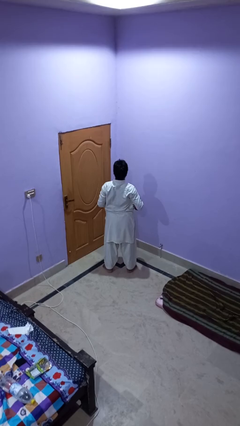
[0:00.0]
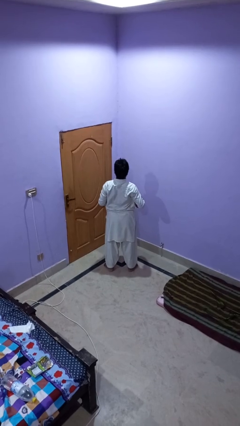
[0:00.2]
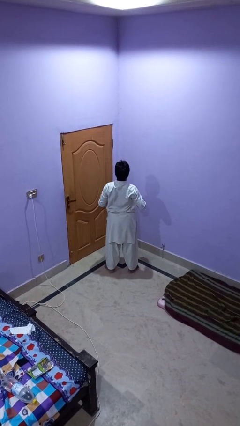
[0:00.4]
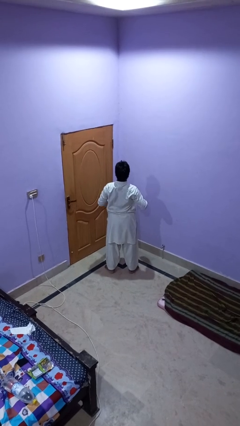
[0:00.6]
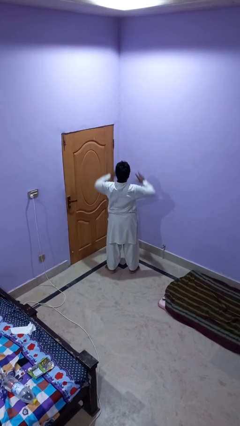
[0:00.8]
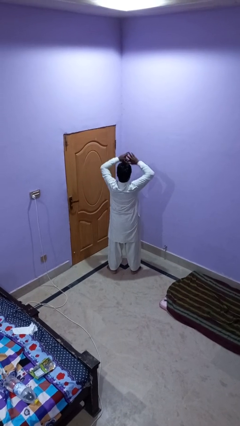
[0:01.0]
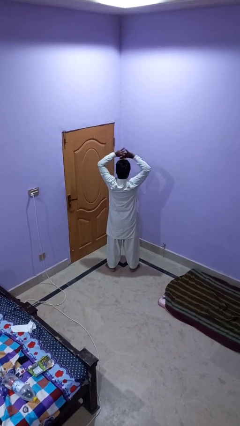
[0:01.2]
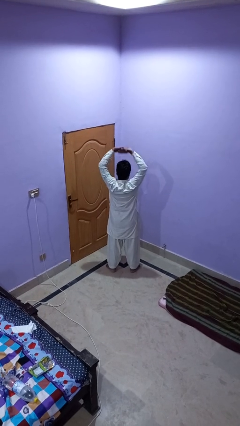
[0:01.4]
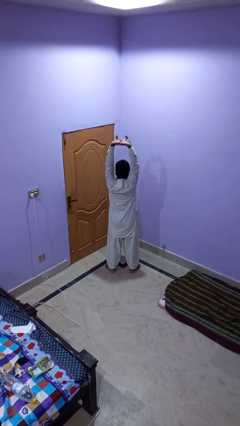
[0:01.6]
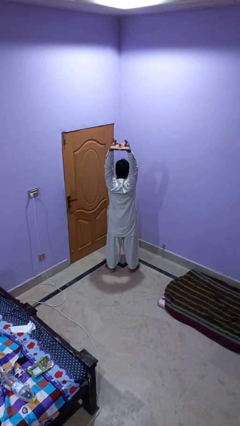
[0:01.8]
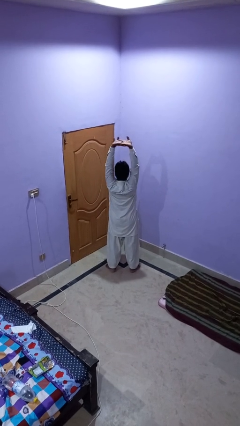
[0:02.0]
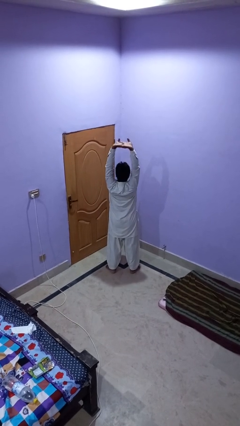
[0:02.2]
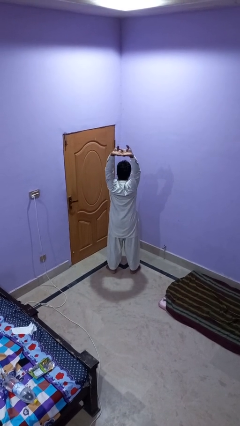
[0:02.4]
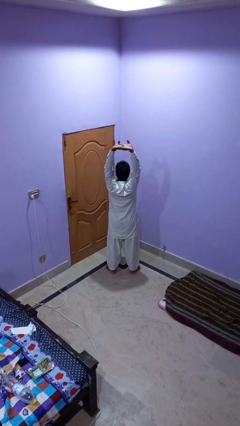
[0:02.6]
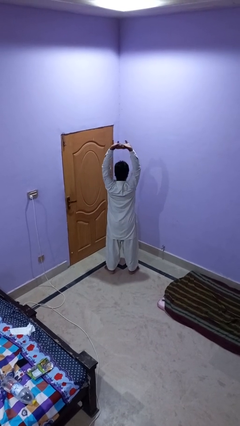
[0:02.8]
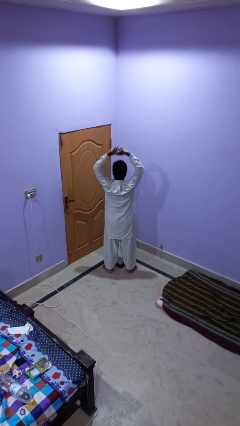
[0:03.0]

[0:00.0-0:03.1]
person stretches arms over head

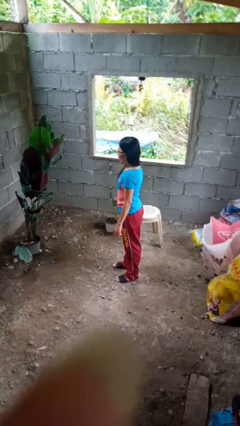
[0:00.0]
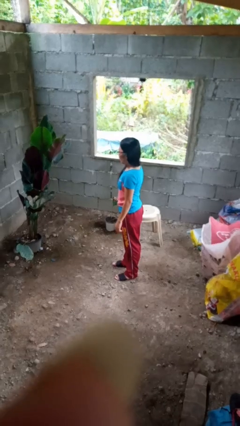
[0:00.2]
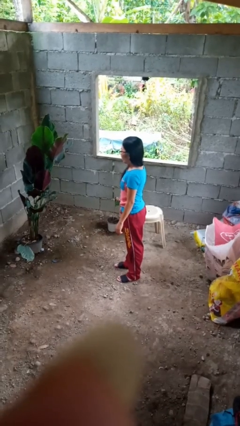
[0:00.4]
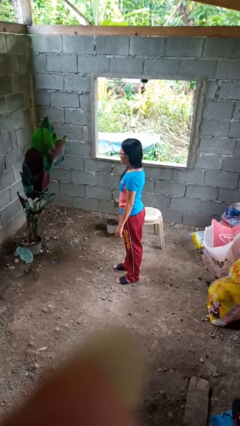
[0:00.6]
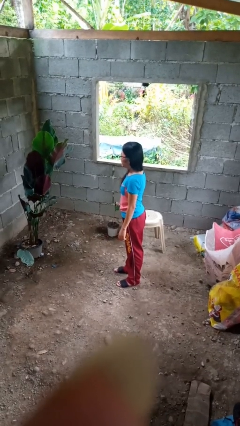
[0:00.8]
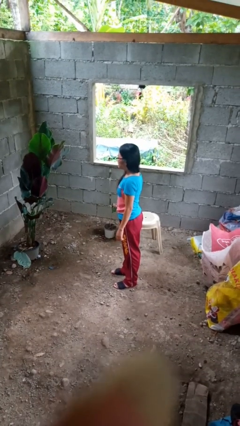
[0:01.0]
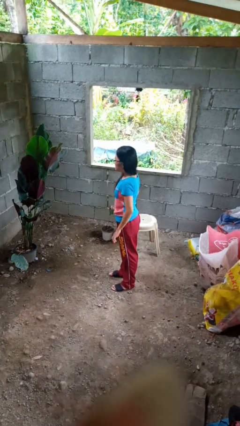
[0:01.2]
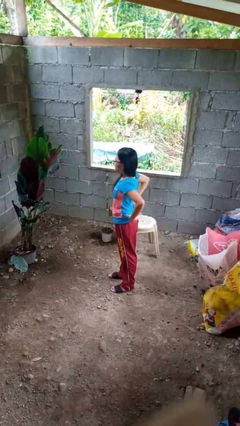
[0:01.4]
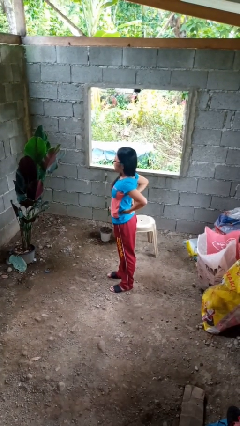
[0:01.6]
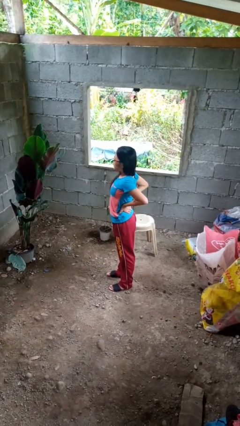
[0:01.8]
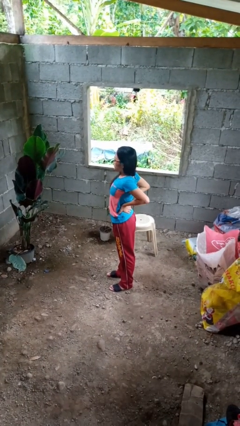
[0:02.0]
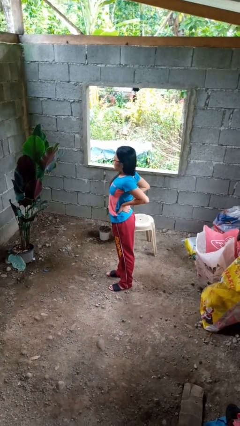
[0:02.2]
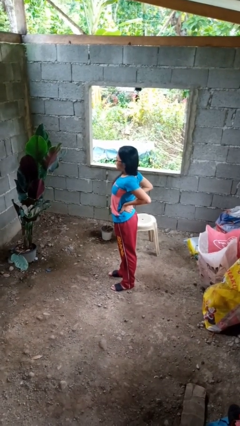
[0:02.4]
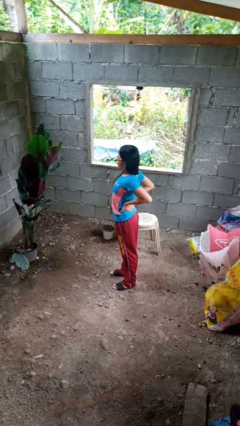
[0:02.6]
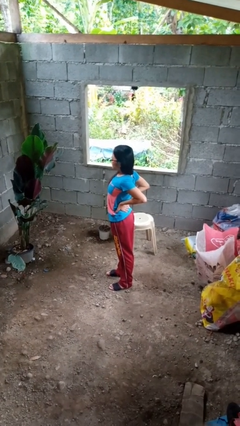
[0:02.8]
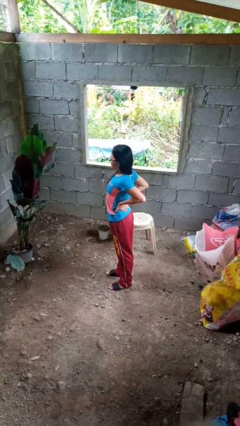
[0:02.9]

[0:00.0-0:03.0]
person stretches back

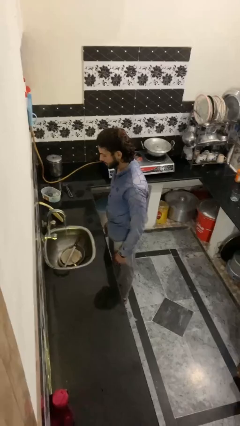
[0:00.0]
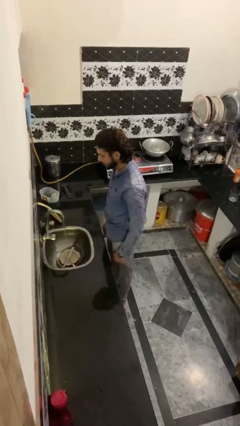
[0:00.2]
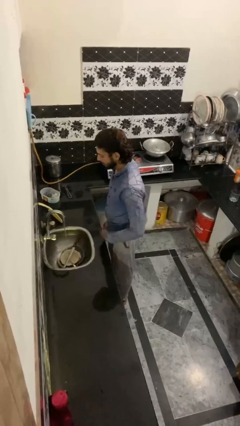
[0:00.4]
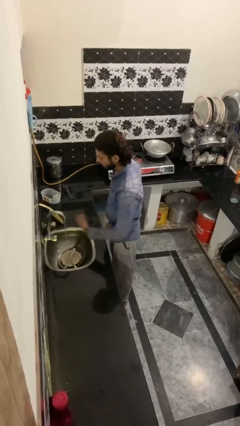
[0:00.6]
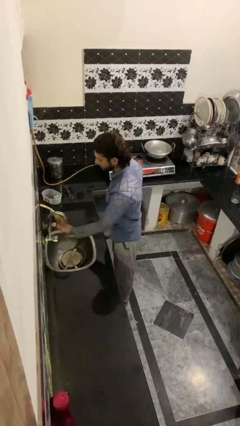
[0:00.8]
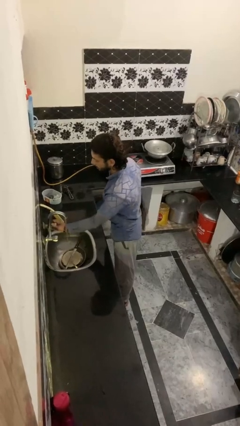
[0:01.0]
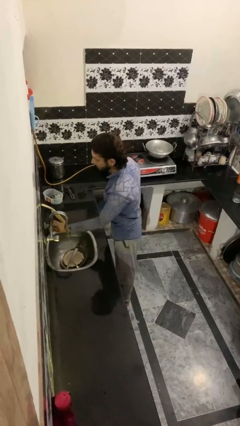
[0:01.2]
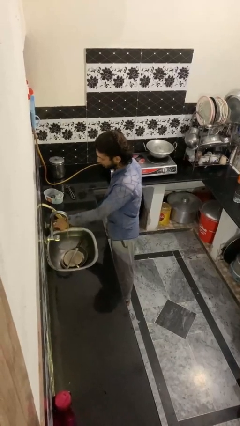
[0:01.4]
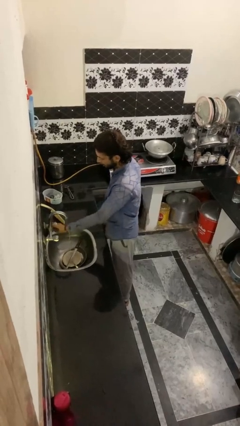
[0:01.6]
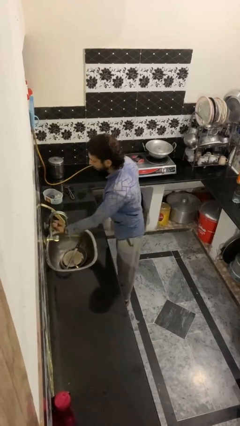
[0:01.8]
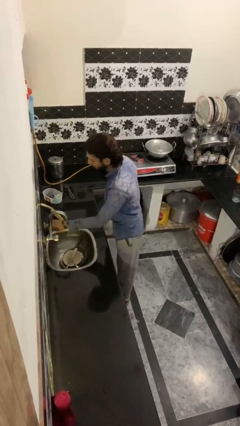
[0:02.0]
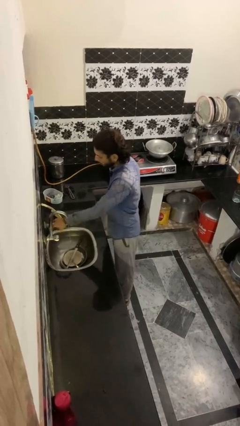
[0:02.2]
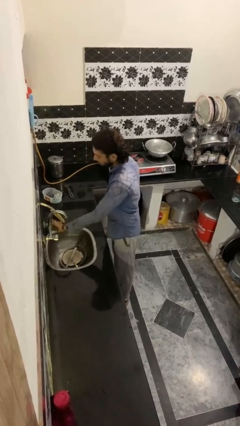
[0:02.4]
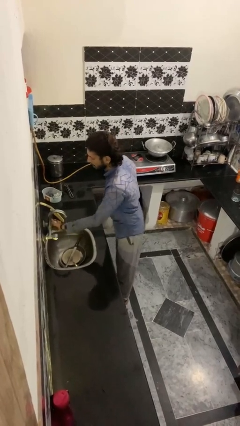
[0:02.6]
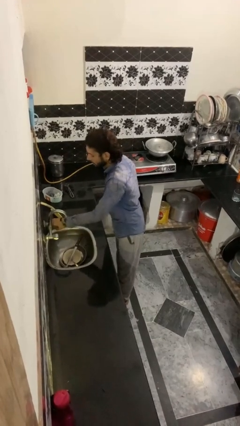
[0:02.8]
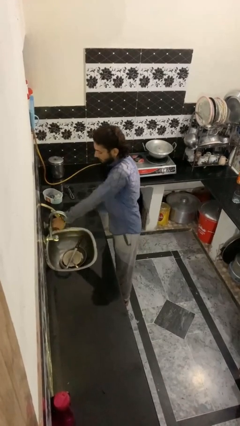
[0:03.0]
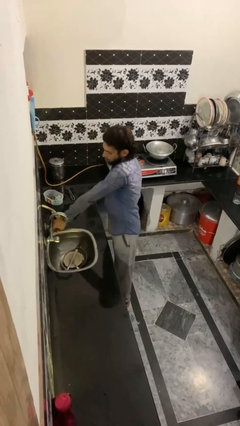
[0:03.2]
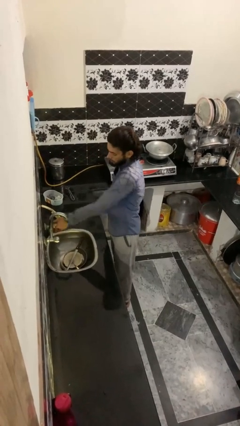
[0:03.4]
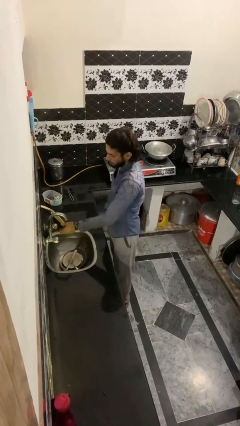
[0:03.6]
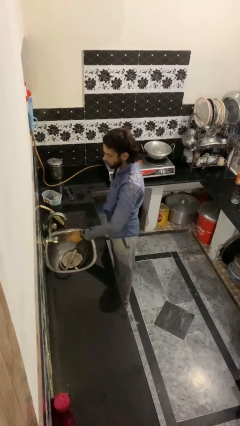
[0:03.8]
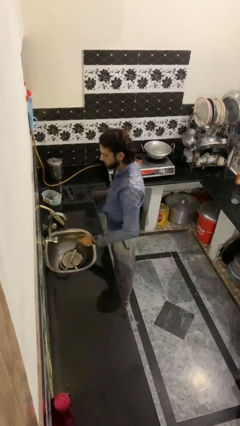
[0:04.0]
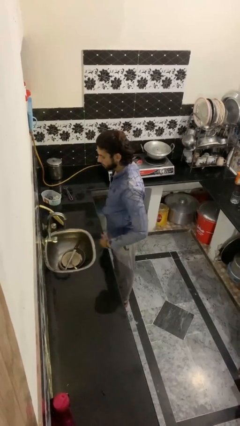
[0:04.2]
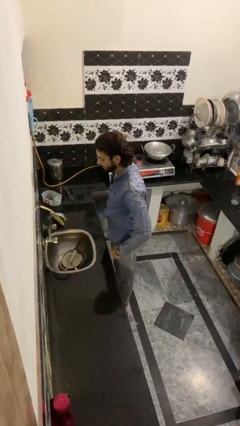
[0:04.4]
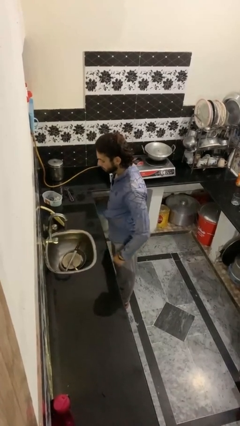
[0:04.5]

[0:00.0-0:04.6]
person turns off faucet

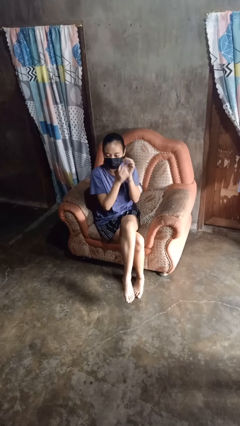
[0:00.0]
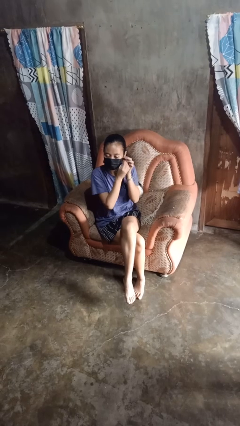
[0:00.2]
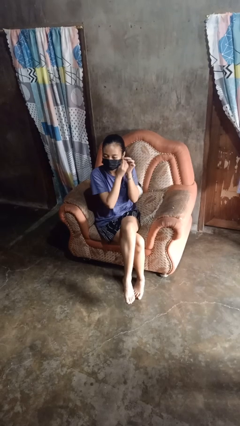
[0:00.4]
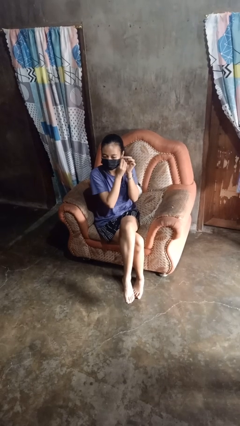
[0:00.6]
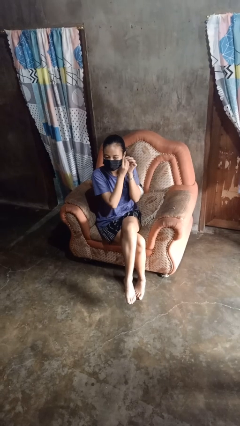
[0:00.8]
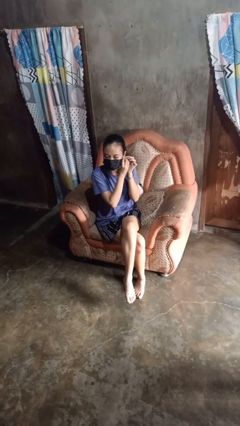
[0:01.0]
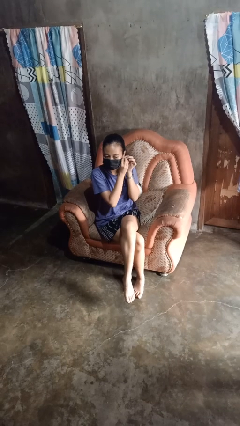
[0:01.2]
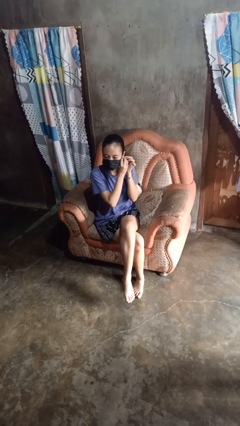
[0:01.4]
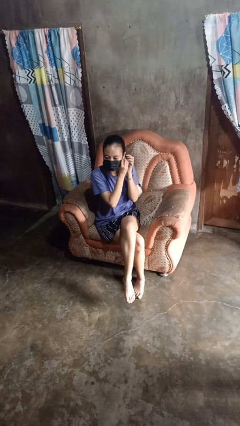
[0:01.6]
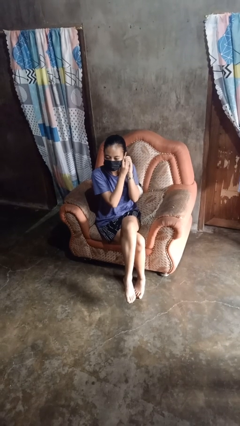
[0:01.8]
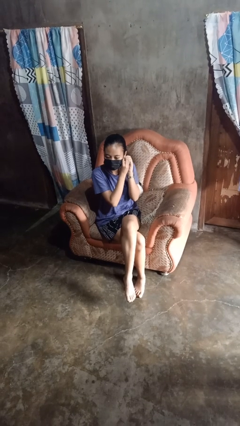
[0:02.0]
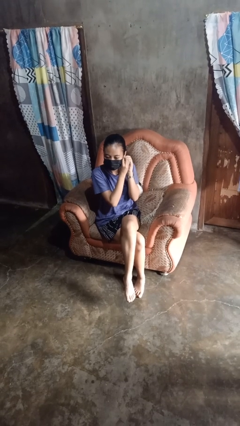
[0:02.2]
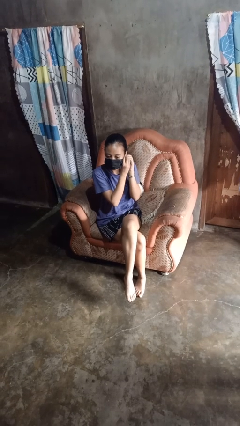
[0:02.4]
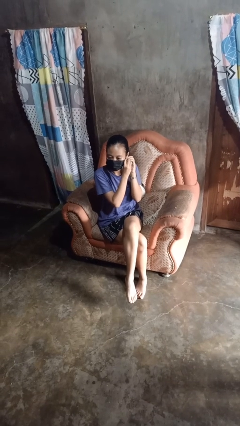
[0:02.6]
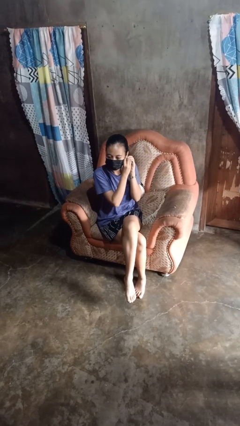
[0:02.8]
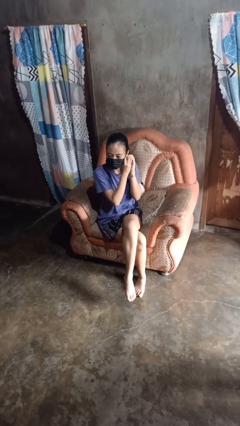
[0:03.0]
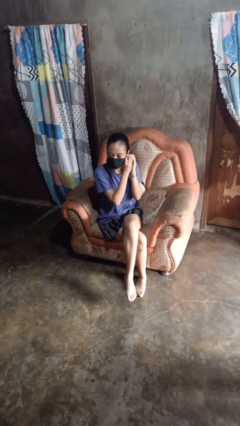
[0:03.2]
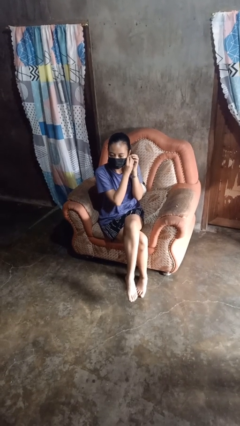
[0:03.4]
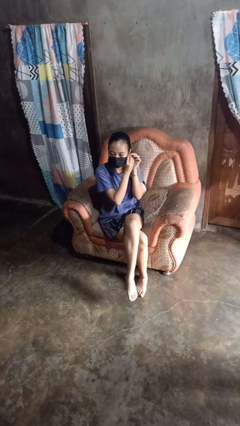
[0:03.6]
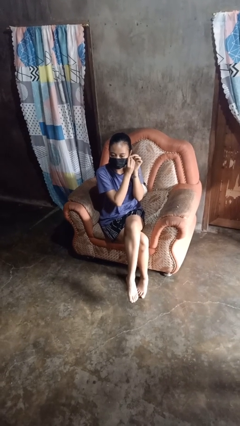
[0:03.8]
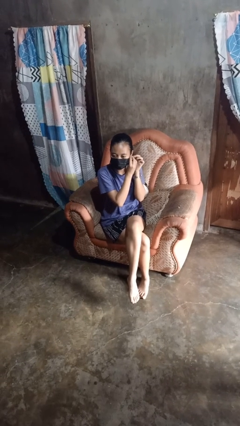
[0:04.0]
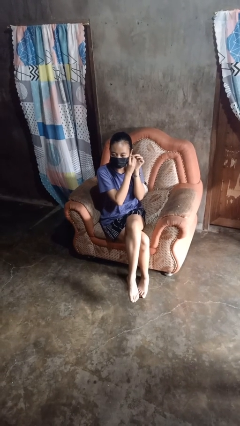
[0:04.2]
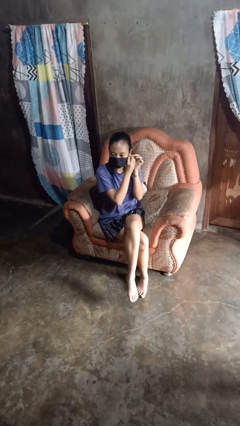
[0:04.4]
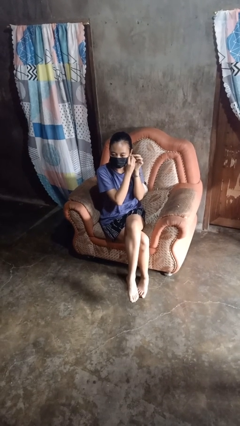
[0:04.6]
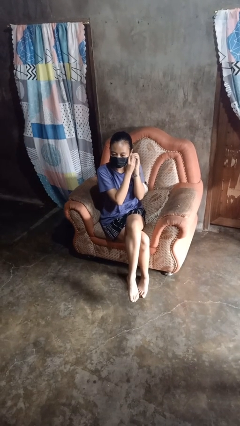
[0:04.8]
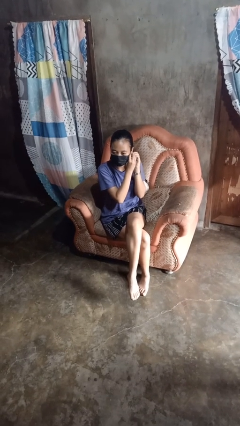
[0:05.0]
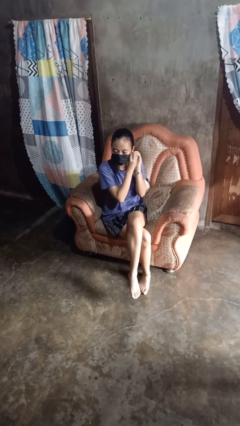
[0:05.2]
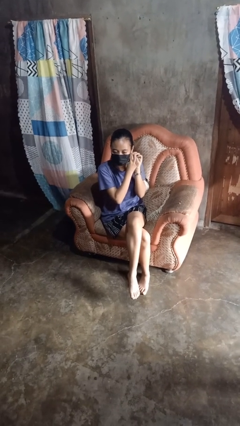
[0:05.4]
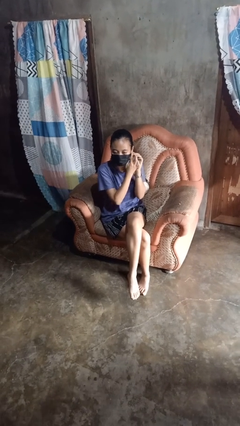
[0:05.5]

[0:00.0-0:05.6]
person puts on earrings

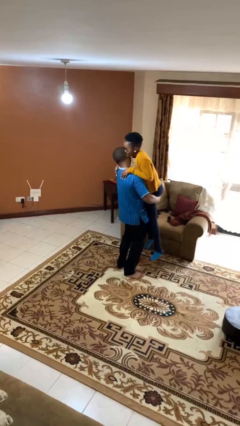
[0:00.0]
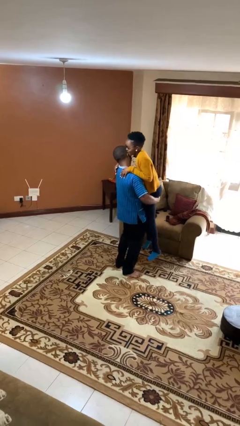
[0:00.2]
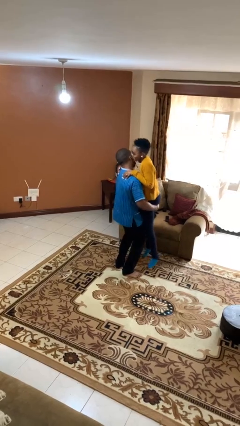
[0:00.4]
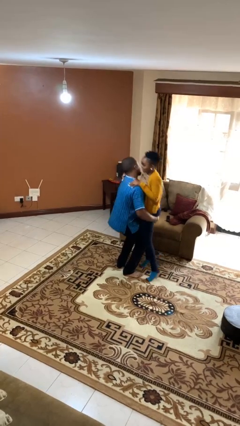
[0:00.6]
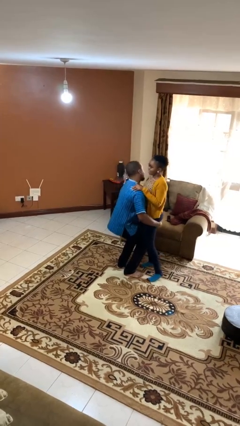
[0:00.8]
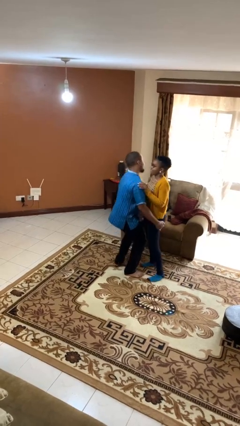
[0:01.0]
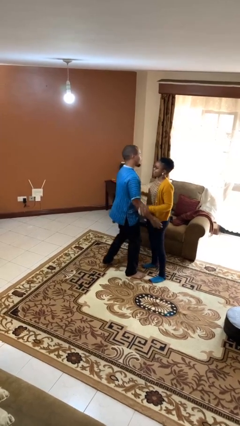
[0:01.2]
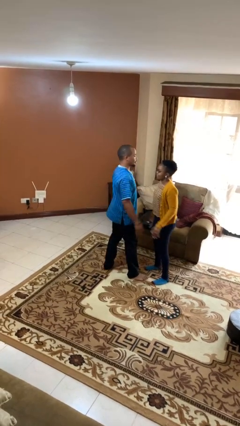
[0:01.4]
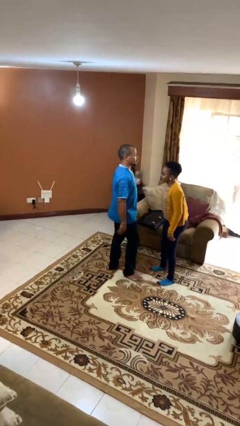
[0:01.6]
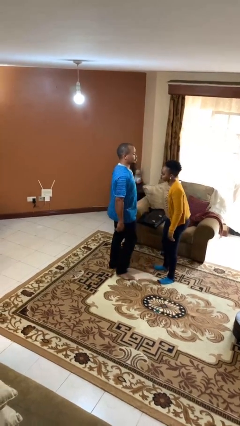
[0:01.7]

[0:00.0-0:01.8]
person puts down person
